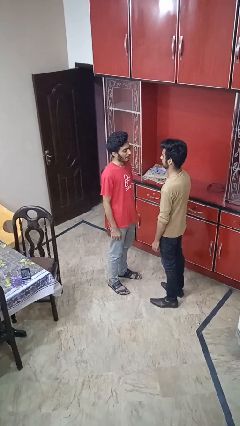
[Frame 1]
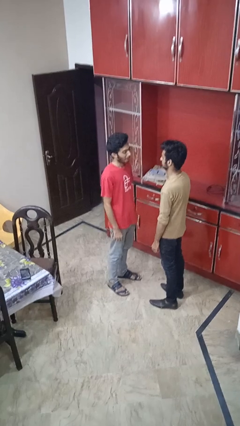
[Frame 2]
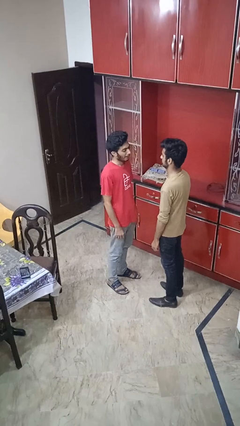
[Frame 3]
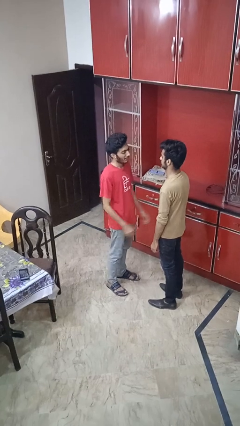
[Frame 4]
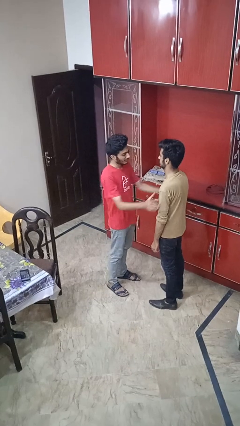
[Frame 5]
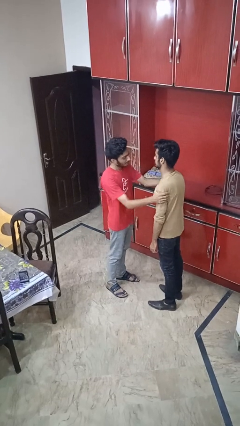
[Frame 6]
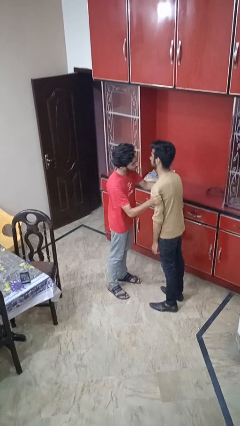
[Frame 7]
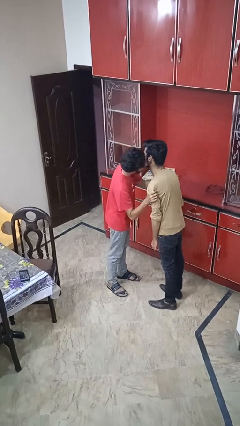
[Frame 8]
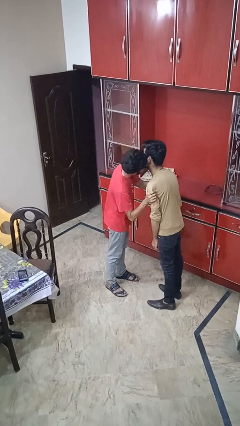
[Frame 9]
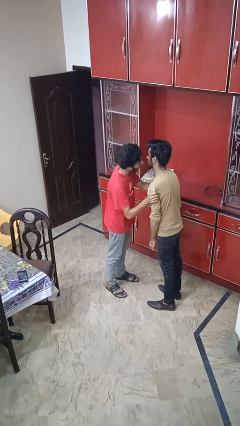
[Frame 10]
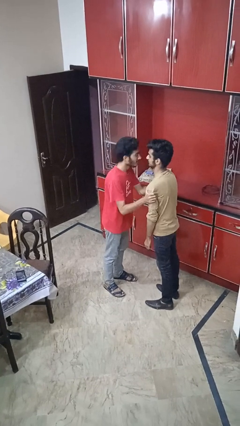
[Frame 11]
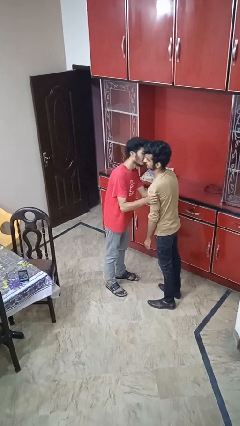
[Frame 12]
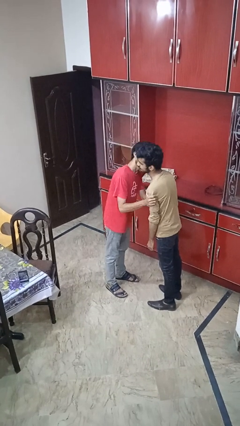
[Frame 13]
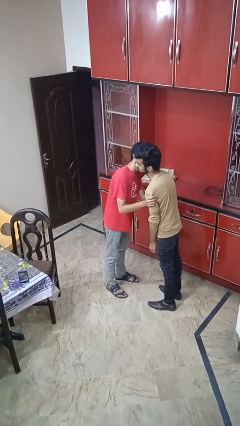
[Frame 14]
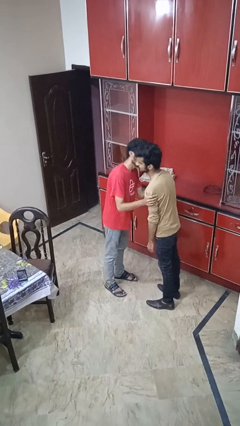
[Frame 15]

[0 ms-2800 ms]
person kisses cheek of person

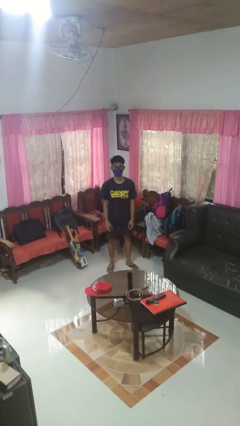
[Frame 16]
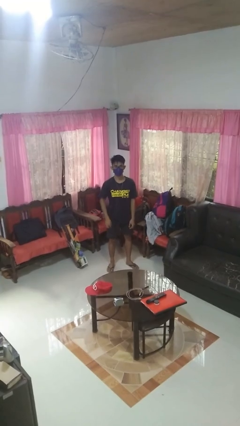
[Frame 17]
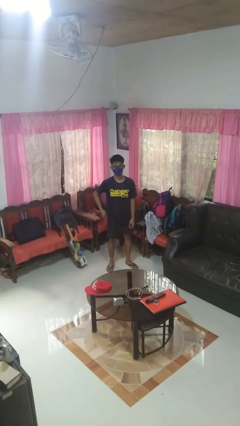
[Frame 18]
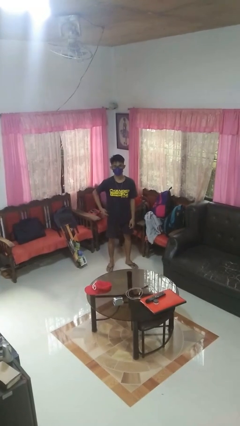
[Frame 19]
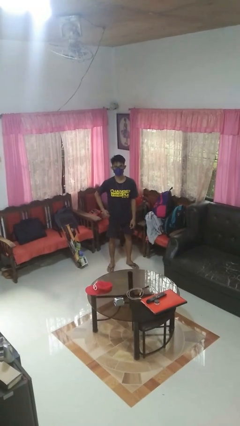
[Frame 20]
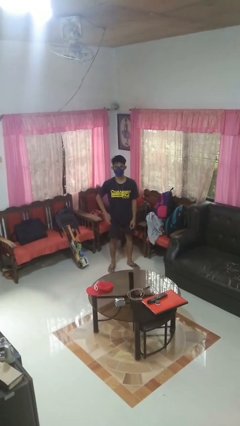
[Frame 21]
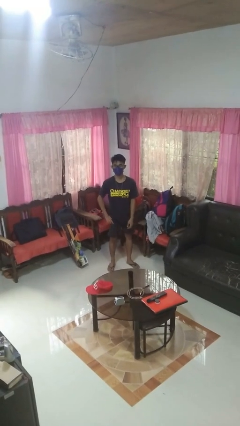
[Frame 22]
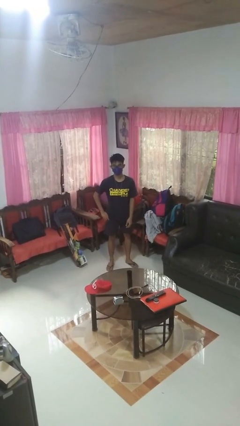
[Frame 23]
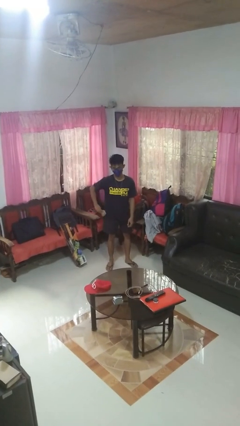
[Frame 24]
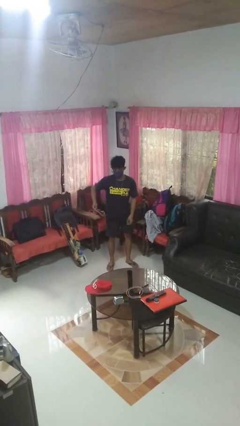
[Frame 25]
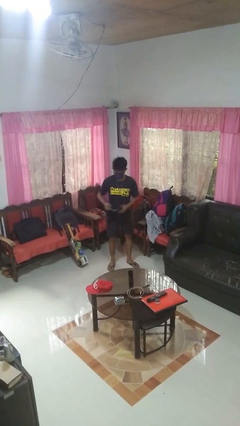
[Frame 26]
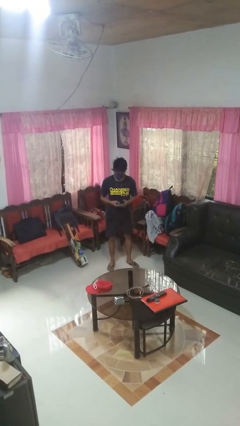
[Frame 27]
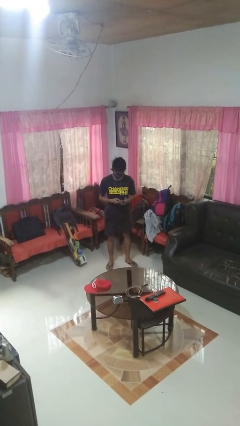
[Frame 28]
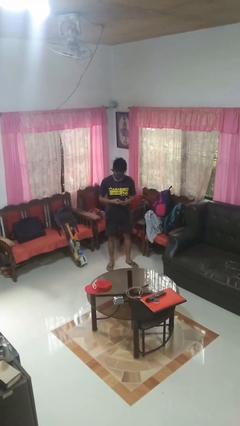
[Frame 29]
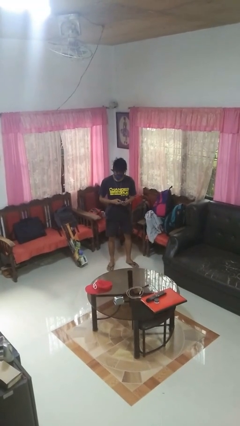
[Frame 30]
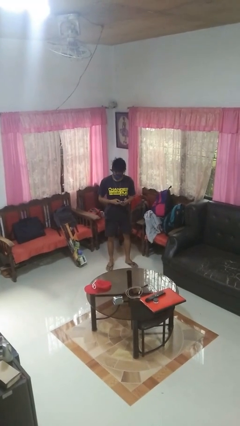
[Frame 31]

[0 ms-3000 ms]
person takes phone from pocket

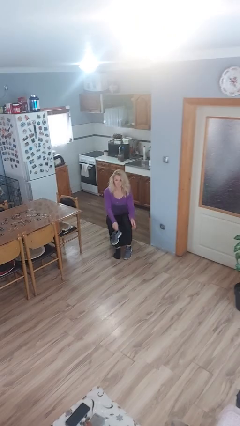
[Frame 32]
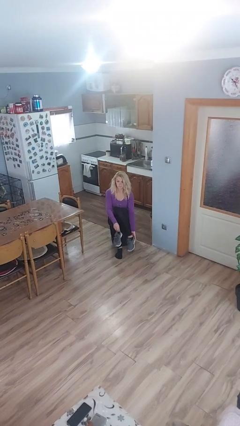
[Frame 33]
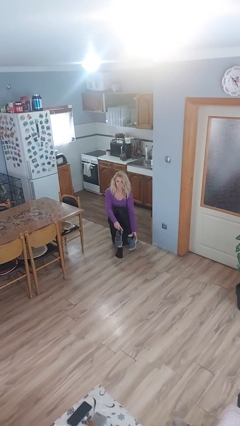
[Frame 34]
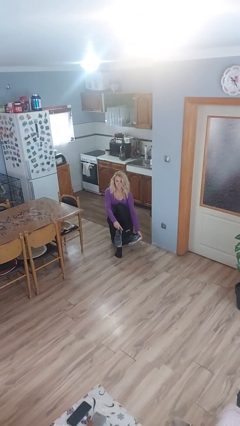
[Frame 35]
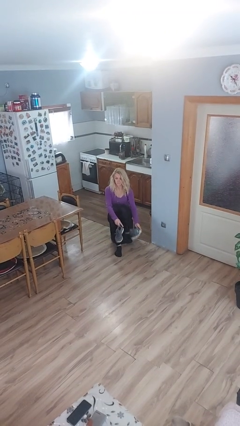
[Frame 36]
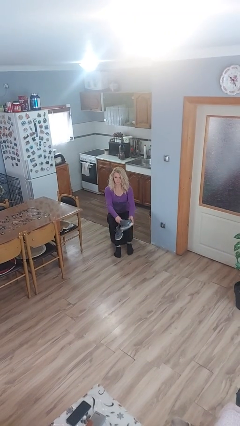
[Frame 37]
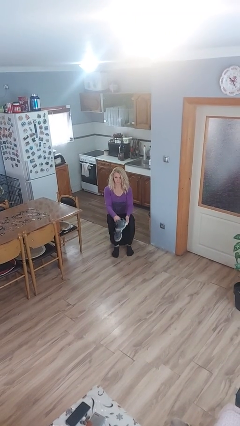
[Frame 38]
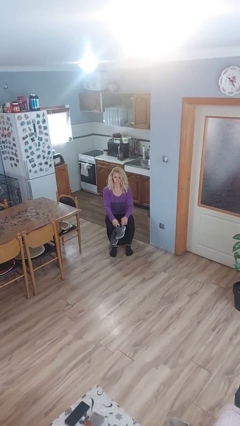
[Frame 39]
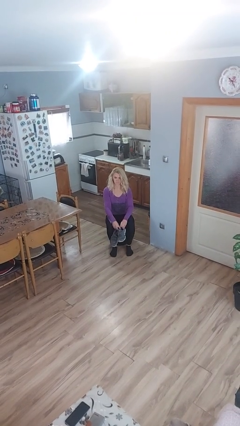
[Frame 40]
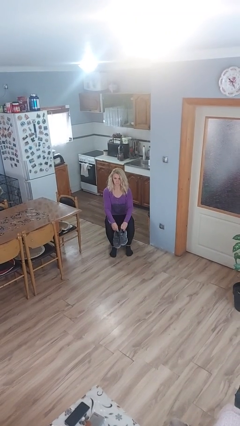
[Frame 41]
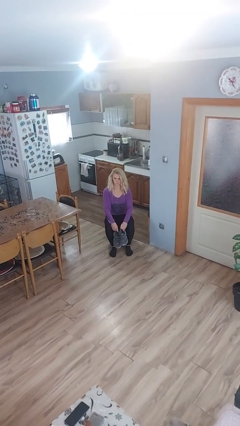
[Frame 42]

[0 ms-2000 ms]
person takes off shoes

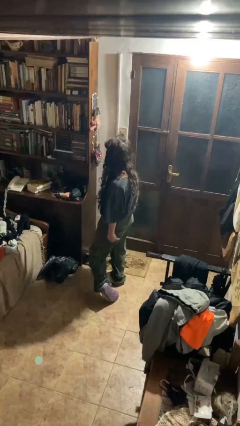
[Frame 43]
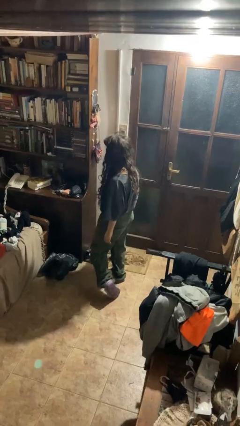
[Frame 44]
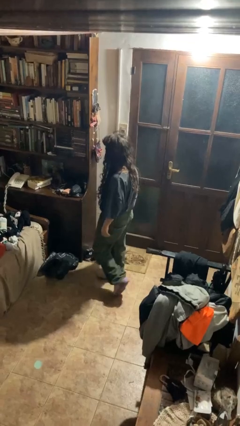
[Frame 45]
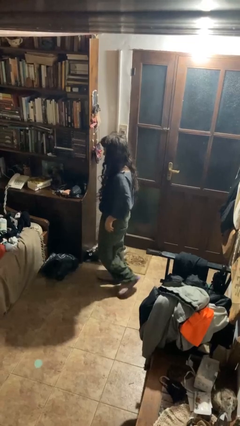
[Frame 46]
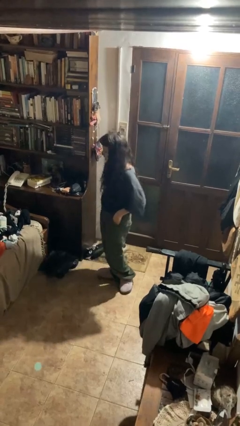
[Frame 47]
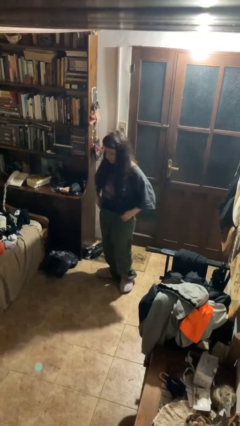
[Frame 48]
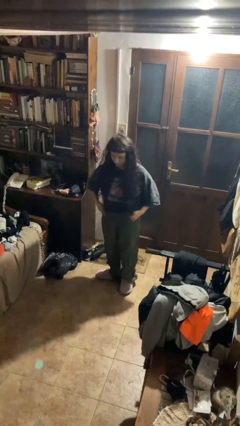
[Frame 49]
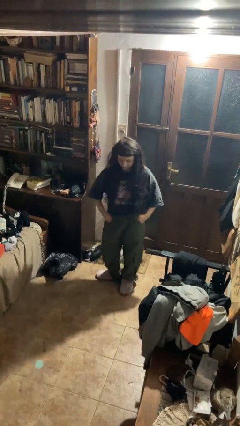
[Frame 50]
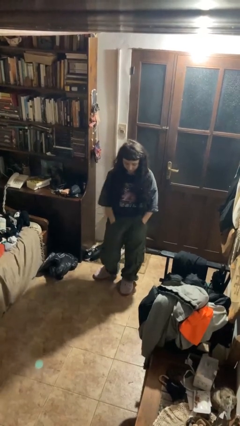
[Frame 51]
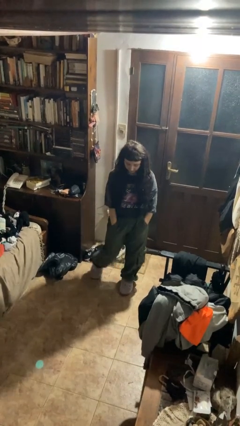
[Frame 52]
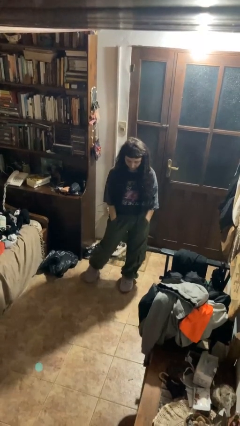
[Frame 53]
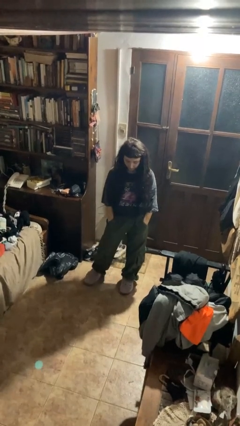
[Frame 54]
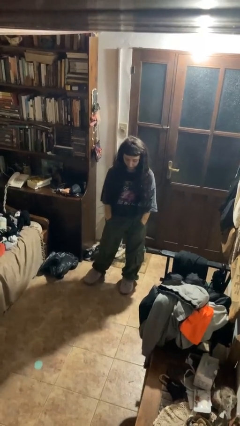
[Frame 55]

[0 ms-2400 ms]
person puts hands in back pockets

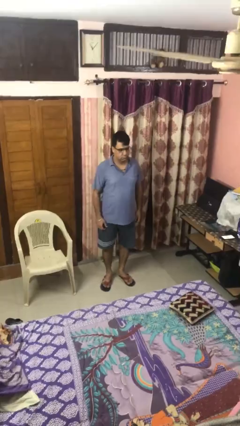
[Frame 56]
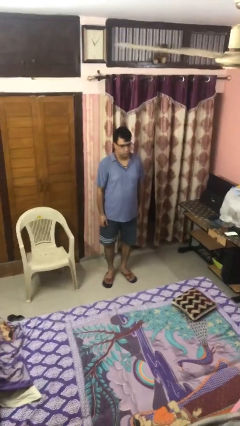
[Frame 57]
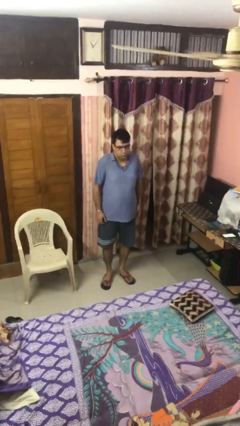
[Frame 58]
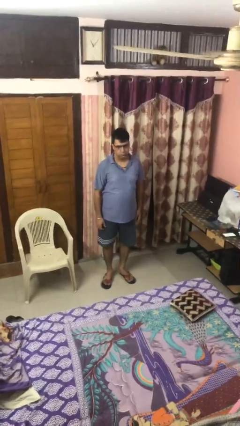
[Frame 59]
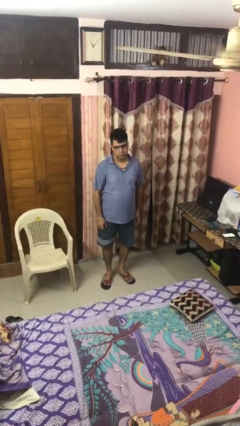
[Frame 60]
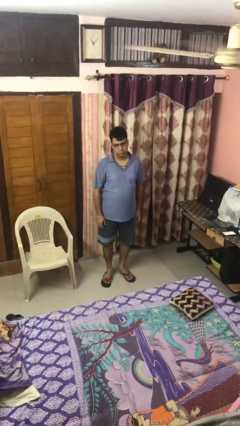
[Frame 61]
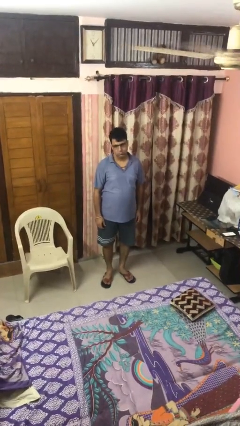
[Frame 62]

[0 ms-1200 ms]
person shrugs

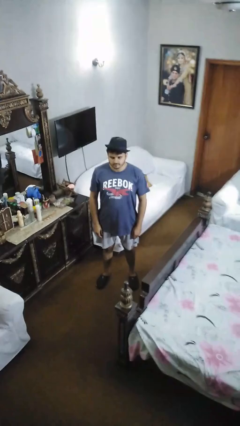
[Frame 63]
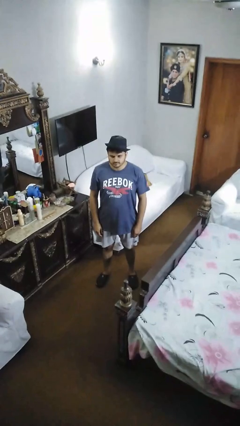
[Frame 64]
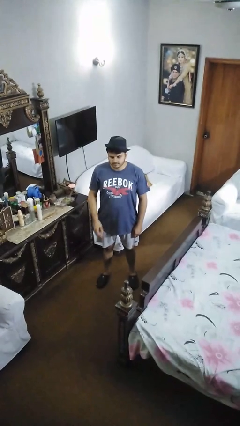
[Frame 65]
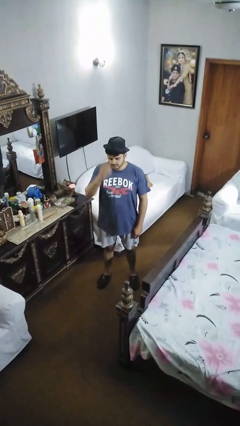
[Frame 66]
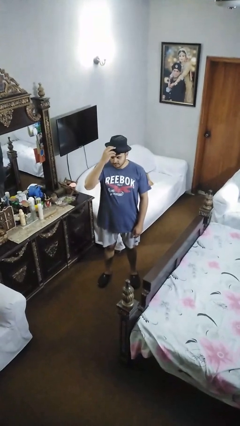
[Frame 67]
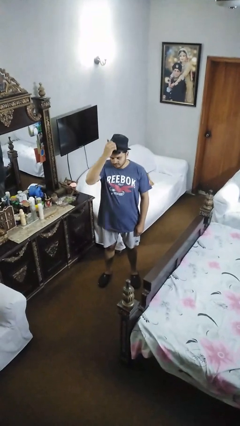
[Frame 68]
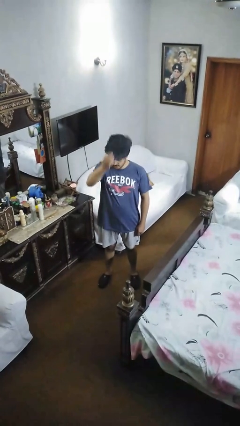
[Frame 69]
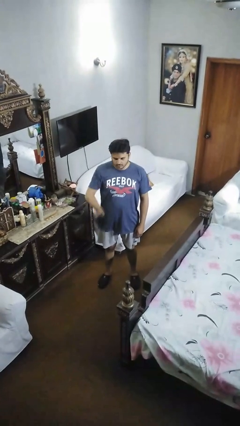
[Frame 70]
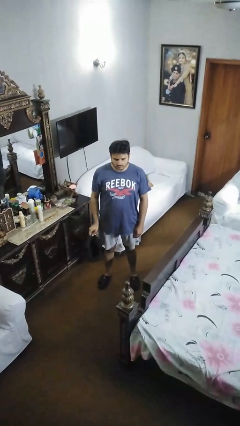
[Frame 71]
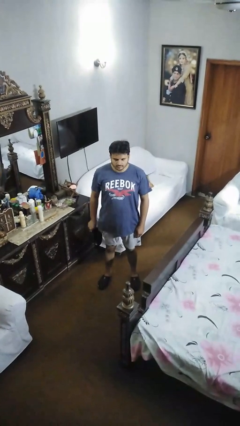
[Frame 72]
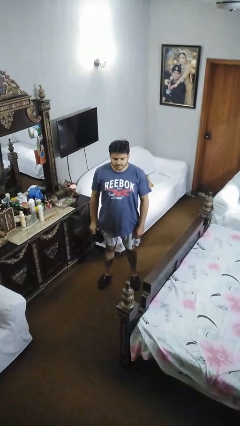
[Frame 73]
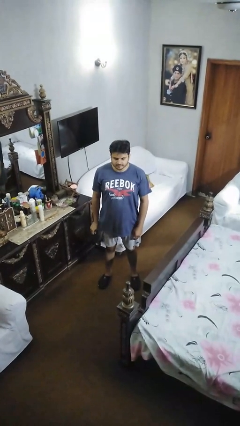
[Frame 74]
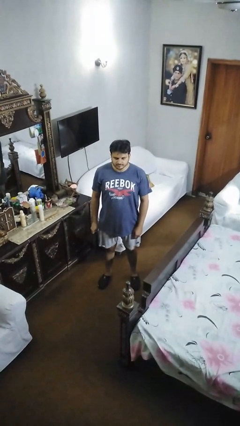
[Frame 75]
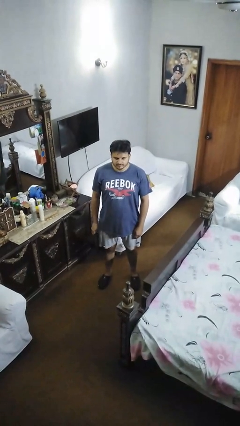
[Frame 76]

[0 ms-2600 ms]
person takes off hat

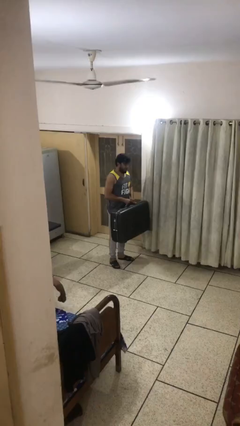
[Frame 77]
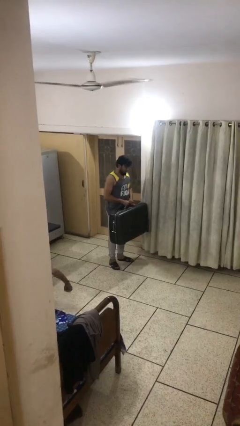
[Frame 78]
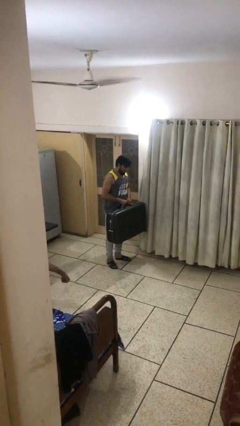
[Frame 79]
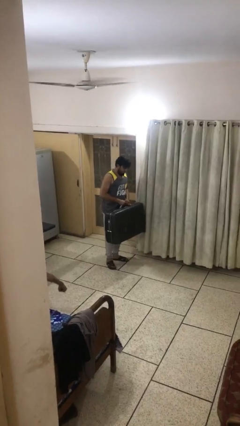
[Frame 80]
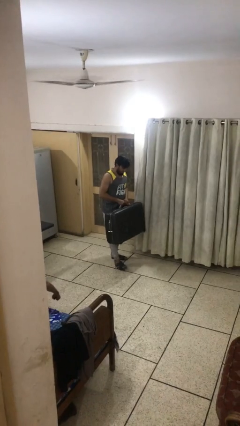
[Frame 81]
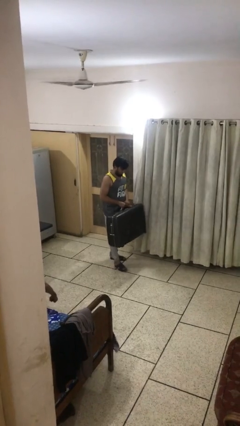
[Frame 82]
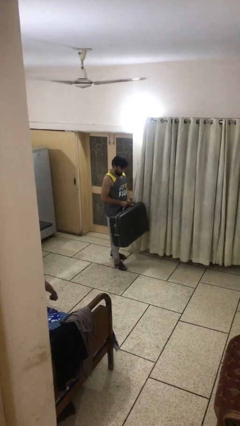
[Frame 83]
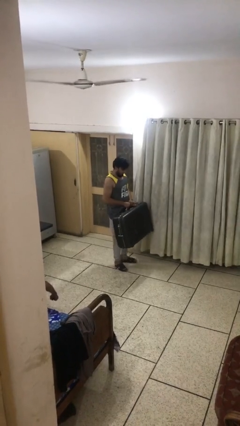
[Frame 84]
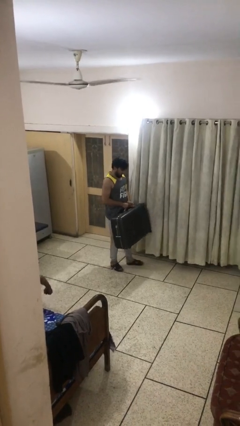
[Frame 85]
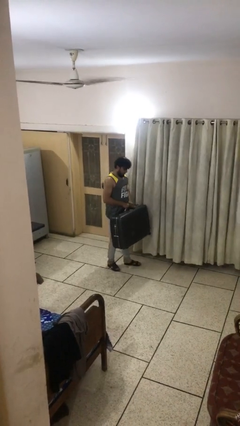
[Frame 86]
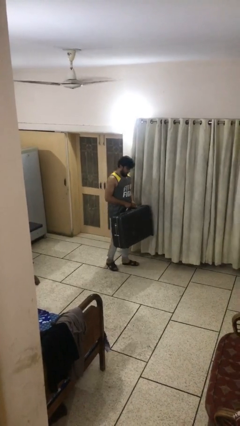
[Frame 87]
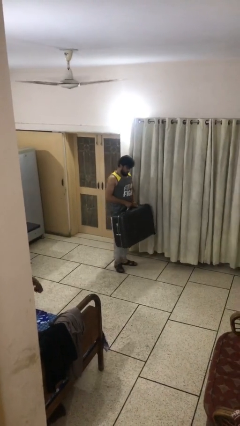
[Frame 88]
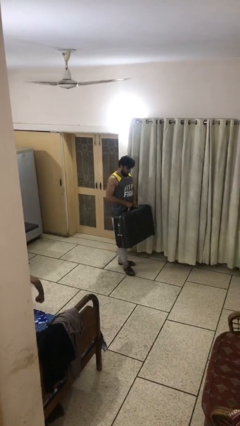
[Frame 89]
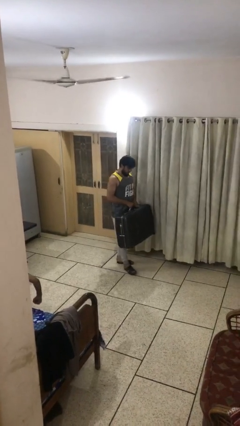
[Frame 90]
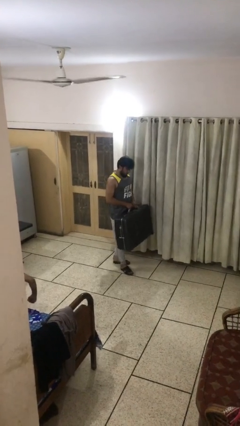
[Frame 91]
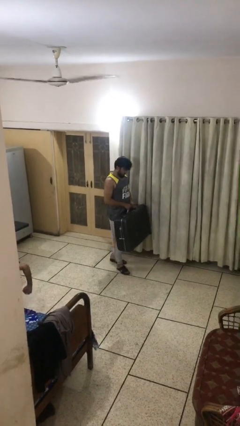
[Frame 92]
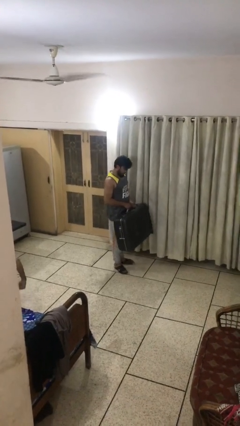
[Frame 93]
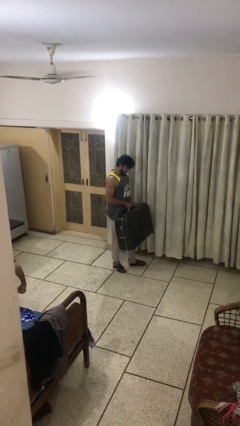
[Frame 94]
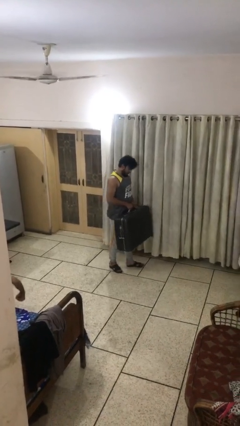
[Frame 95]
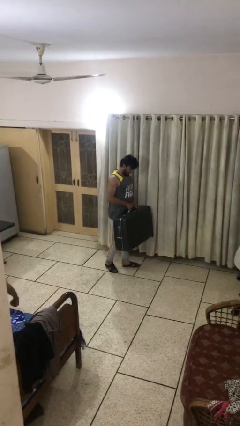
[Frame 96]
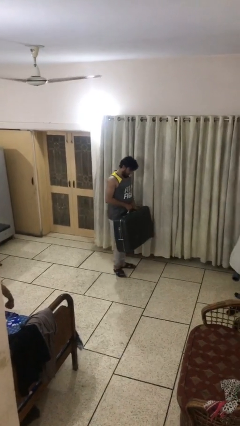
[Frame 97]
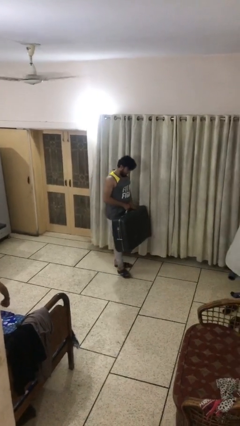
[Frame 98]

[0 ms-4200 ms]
person carries heavy object
